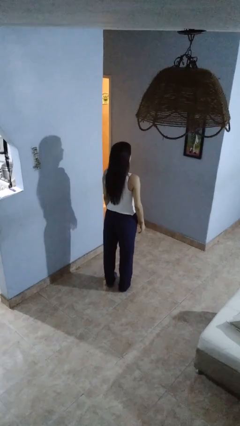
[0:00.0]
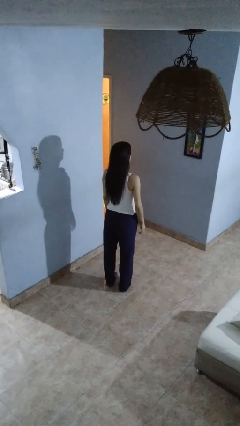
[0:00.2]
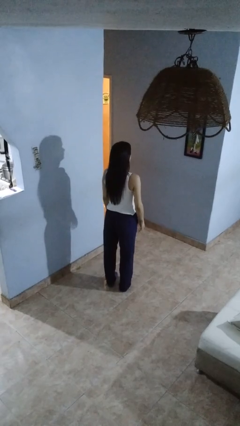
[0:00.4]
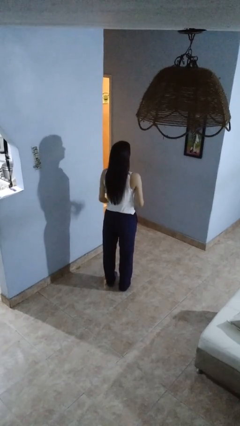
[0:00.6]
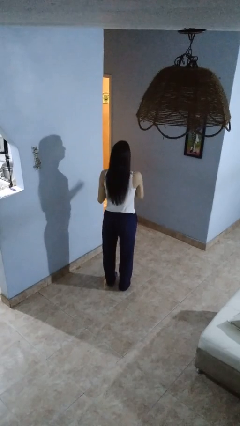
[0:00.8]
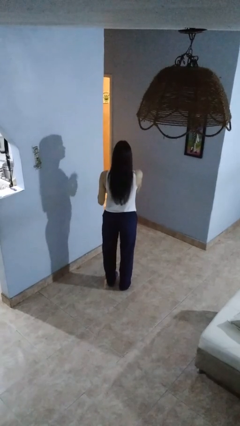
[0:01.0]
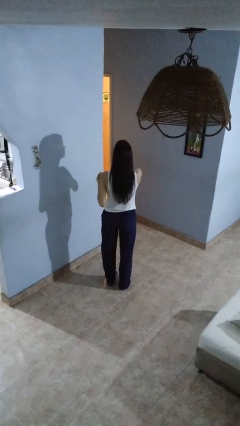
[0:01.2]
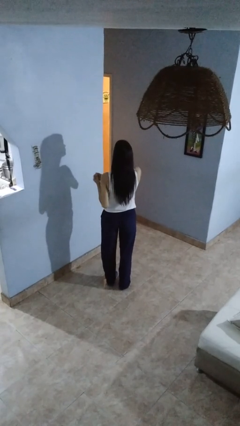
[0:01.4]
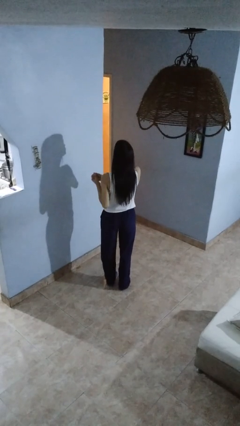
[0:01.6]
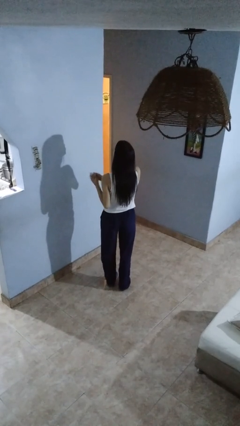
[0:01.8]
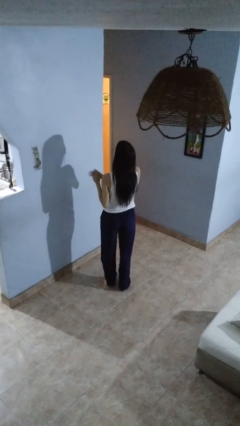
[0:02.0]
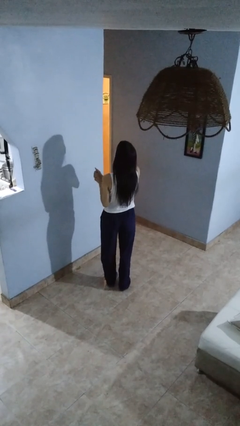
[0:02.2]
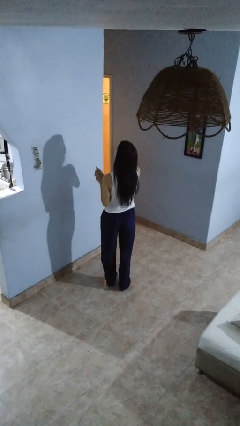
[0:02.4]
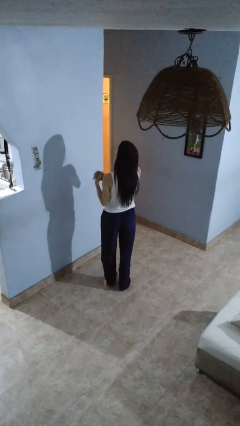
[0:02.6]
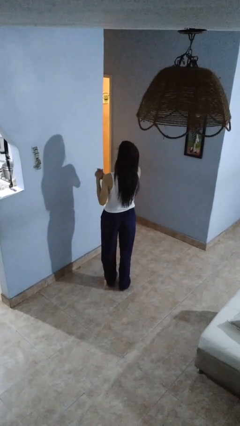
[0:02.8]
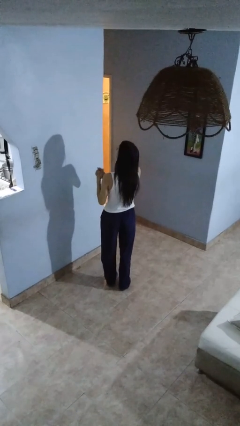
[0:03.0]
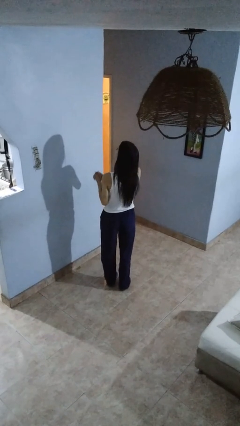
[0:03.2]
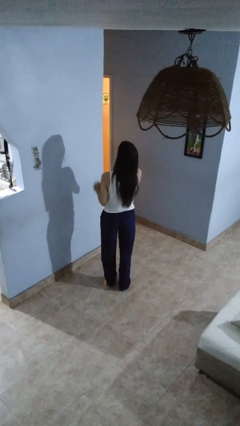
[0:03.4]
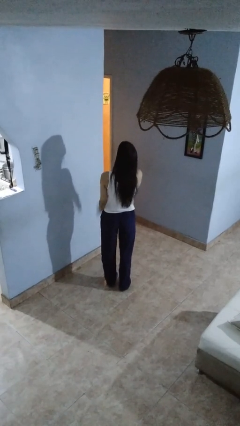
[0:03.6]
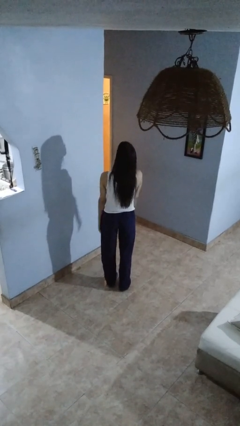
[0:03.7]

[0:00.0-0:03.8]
person cracks knuckles

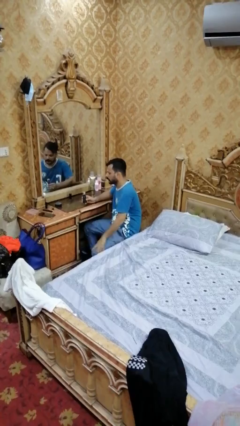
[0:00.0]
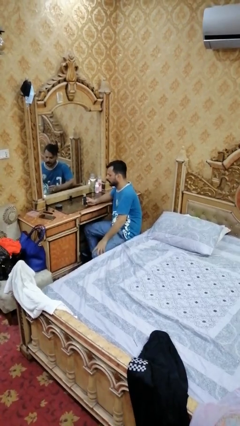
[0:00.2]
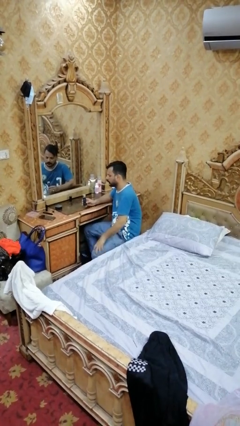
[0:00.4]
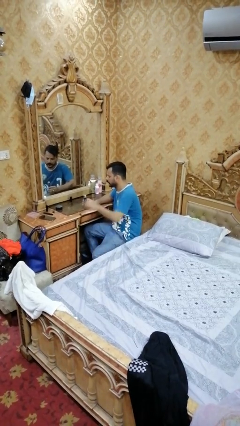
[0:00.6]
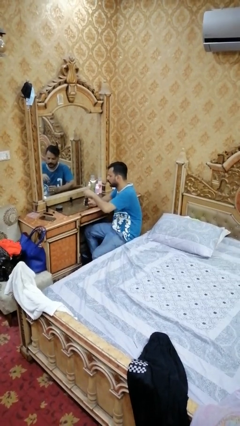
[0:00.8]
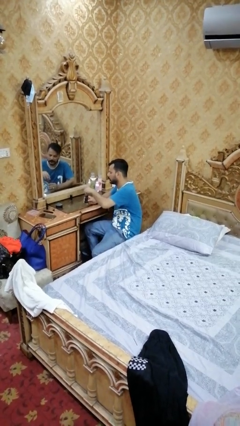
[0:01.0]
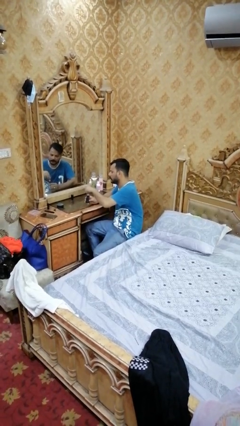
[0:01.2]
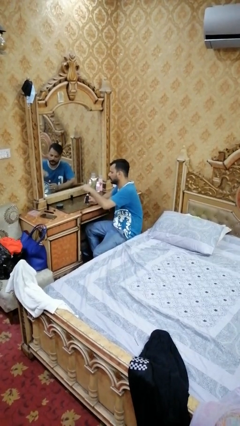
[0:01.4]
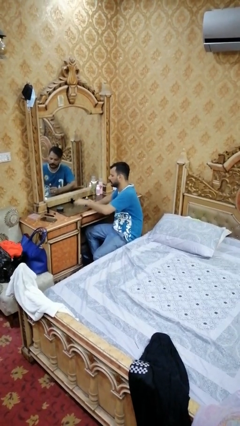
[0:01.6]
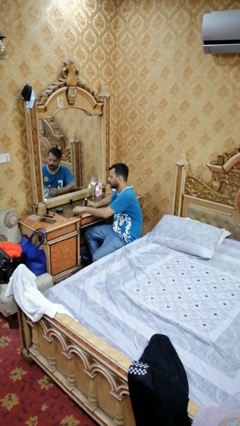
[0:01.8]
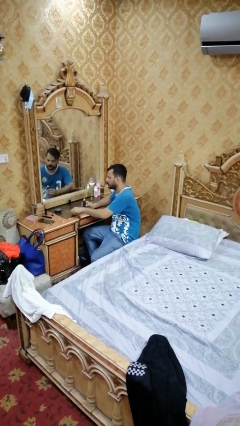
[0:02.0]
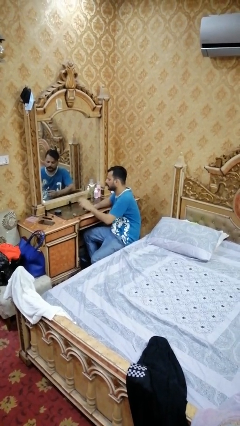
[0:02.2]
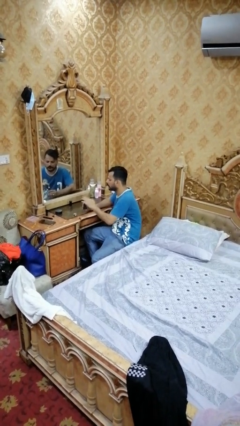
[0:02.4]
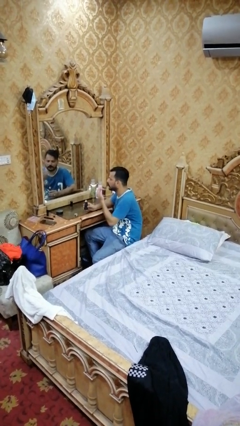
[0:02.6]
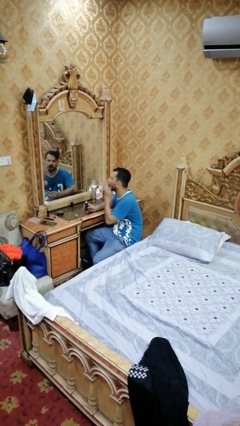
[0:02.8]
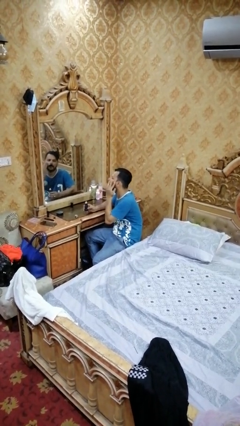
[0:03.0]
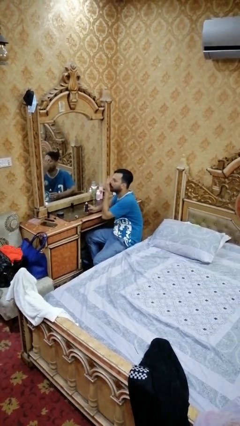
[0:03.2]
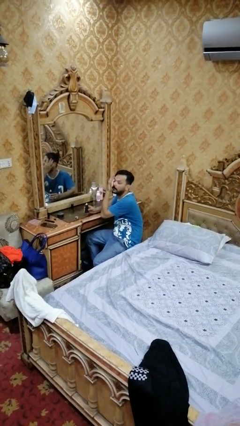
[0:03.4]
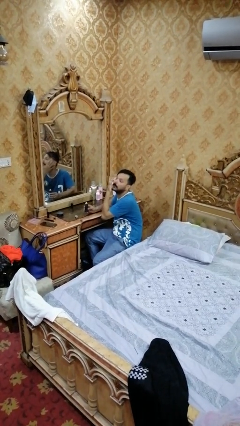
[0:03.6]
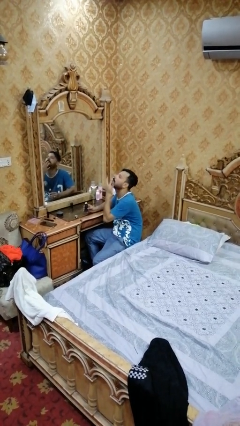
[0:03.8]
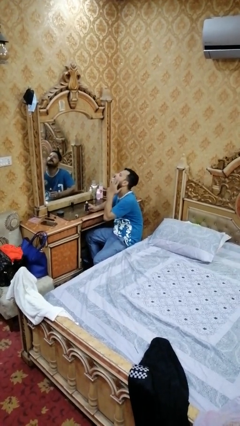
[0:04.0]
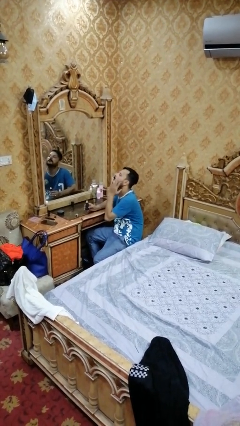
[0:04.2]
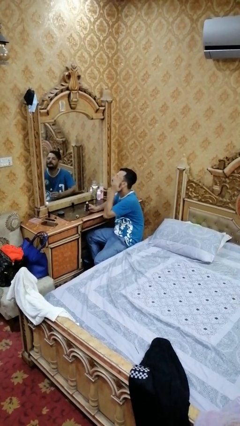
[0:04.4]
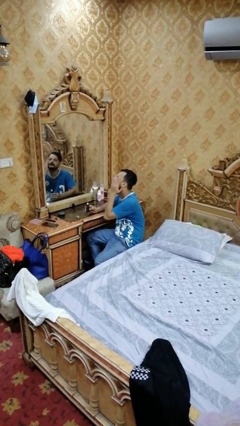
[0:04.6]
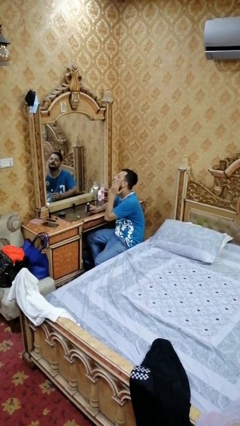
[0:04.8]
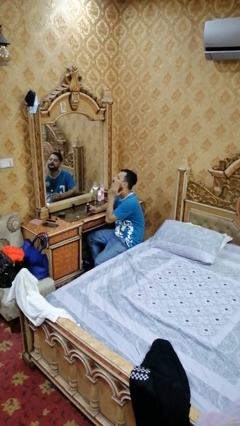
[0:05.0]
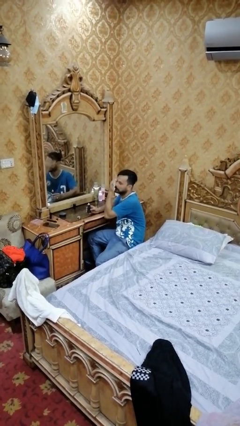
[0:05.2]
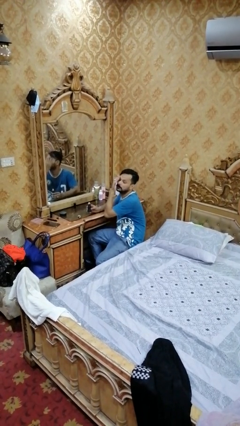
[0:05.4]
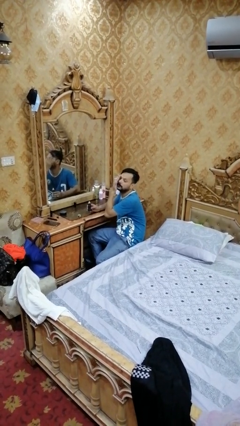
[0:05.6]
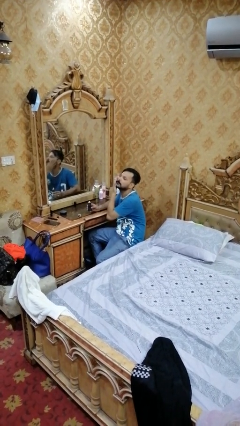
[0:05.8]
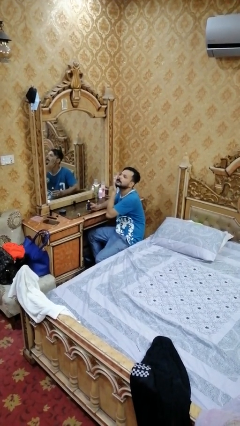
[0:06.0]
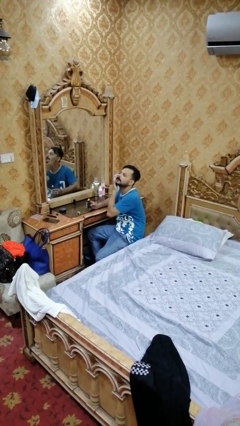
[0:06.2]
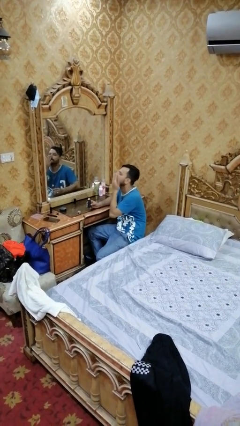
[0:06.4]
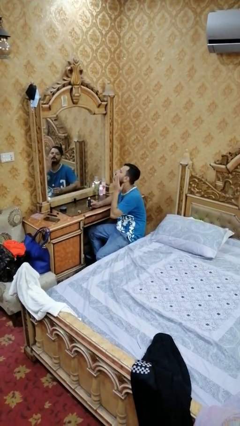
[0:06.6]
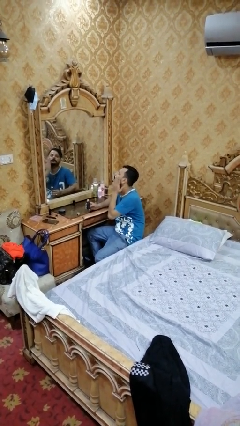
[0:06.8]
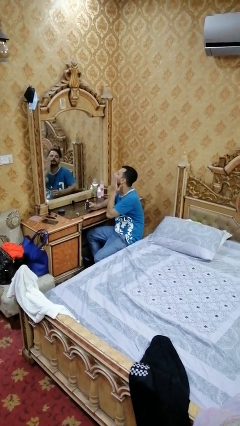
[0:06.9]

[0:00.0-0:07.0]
person applies foundation makeup

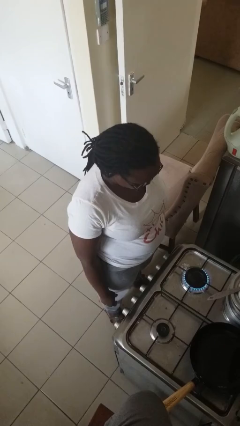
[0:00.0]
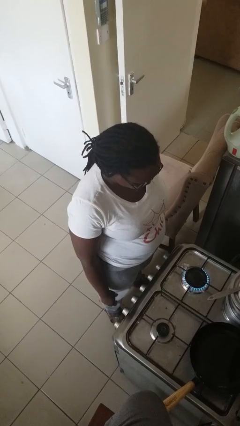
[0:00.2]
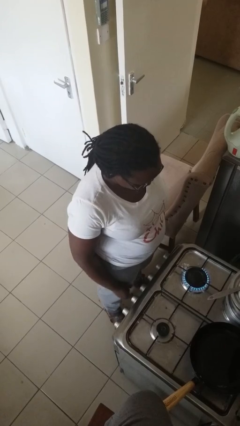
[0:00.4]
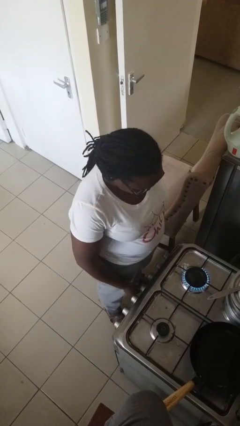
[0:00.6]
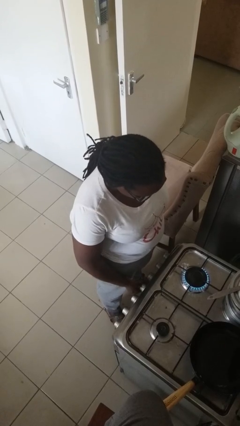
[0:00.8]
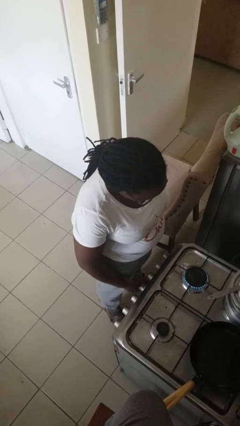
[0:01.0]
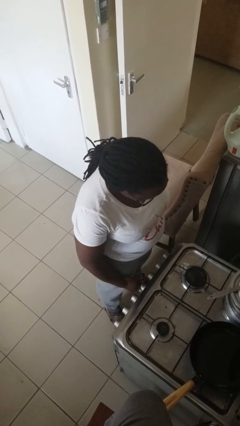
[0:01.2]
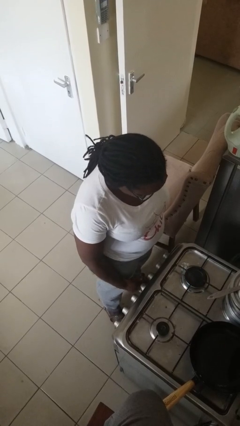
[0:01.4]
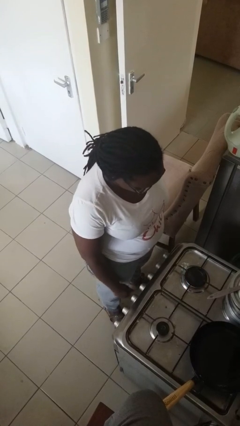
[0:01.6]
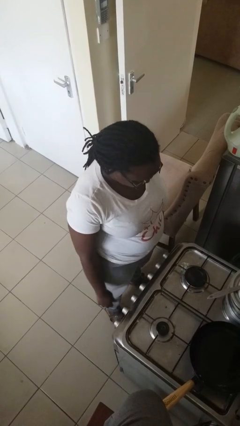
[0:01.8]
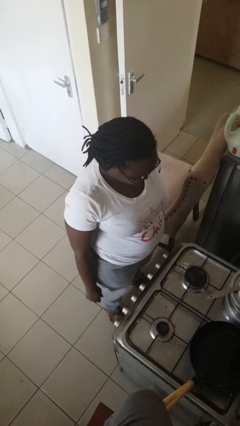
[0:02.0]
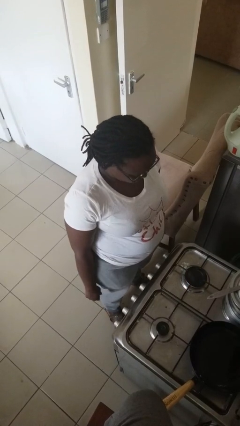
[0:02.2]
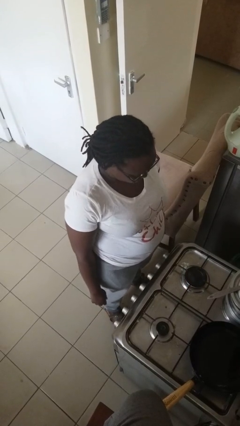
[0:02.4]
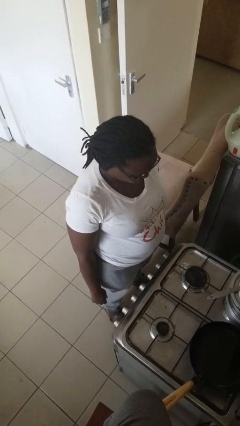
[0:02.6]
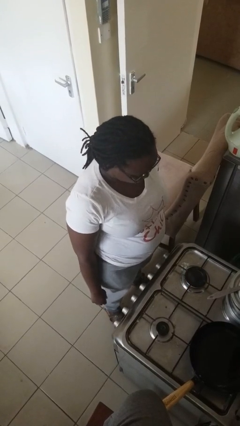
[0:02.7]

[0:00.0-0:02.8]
person turns off stovetop

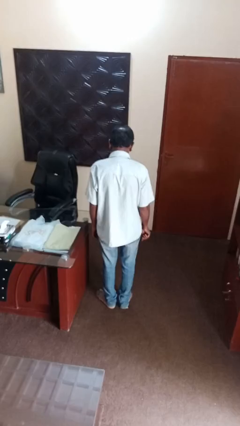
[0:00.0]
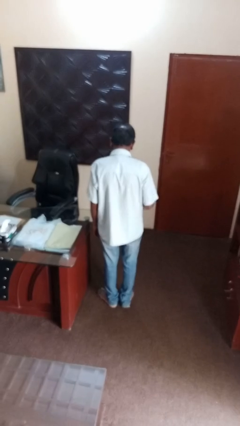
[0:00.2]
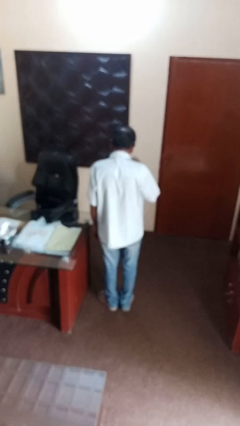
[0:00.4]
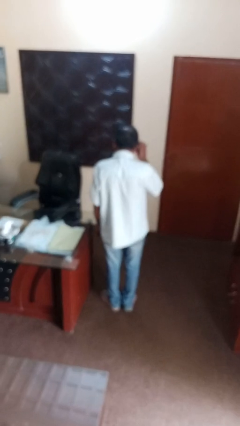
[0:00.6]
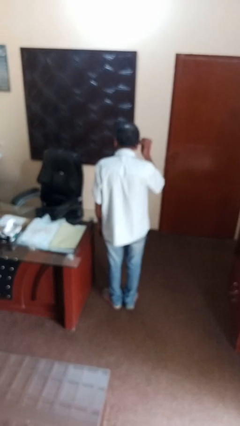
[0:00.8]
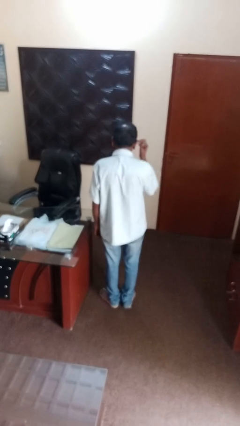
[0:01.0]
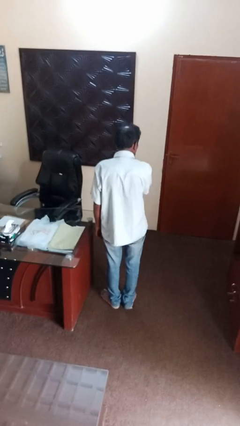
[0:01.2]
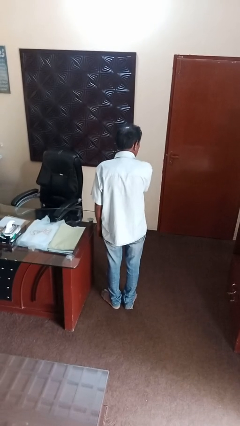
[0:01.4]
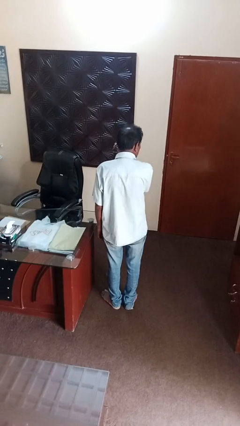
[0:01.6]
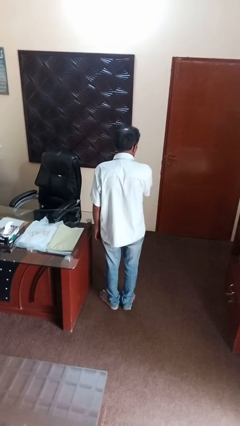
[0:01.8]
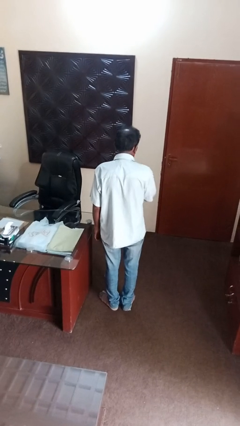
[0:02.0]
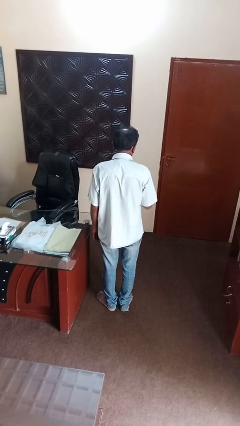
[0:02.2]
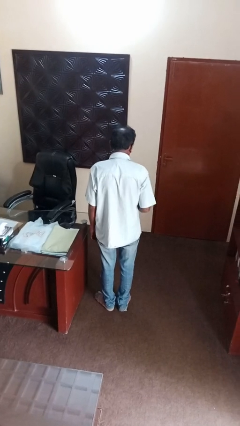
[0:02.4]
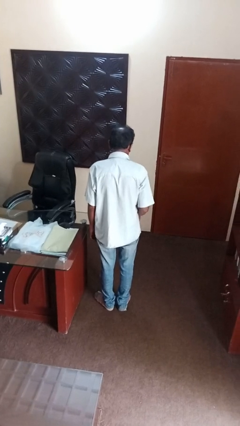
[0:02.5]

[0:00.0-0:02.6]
person applies eye makeup

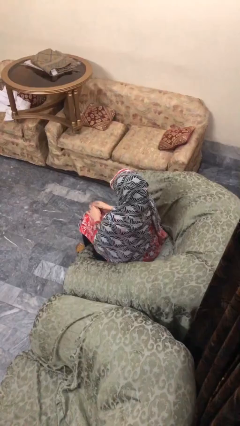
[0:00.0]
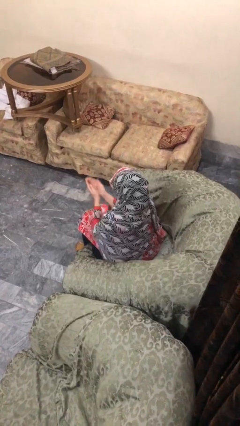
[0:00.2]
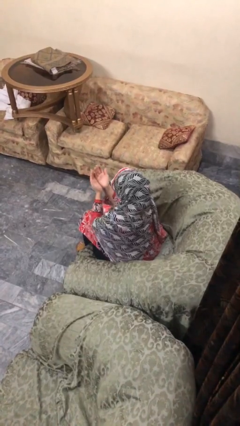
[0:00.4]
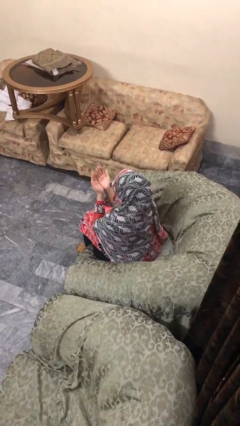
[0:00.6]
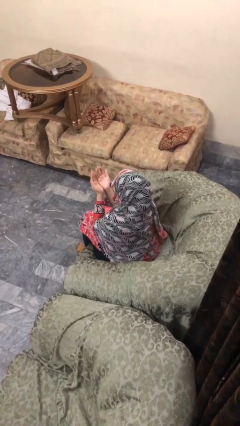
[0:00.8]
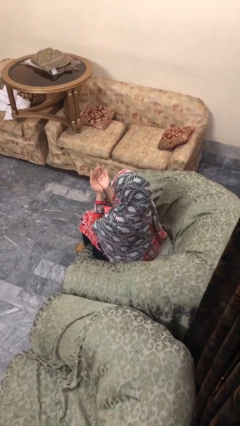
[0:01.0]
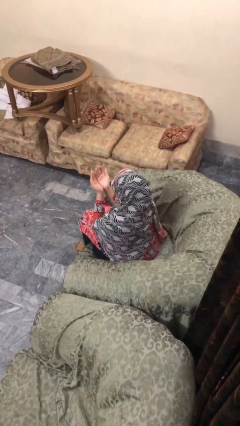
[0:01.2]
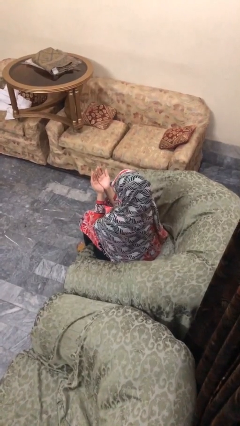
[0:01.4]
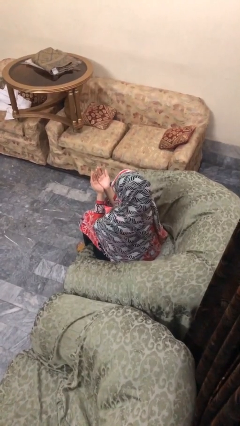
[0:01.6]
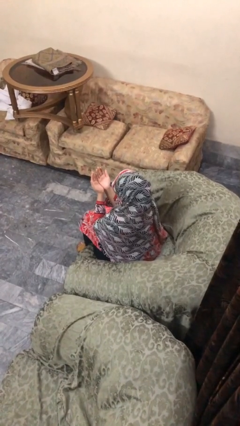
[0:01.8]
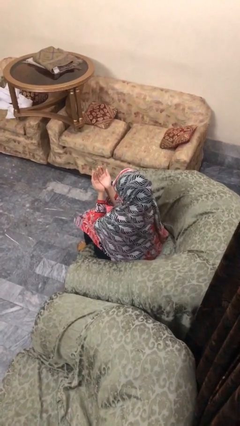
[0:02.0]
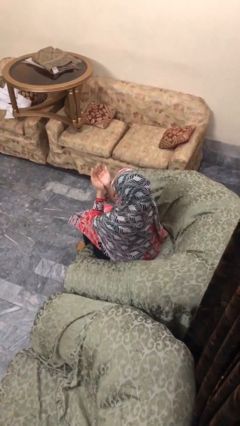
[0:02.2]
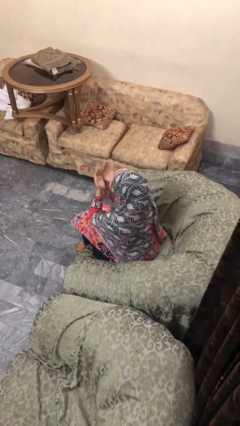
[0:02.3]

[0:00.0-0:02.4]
person prays
